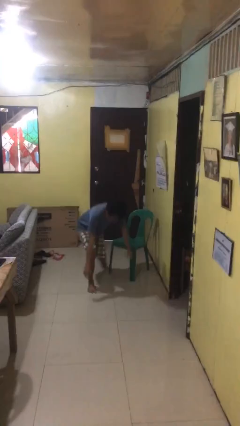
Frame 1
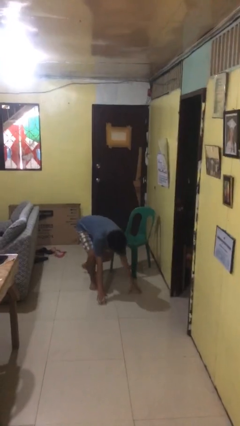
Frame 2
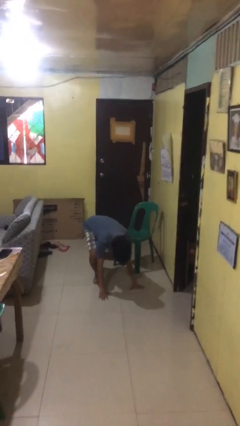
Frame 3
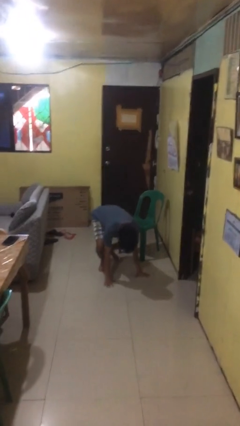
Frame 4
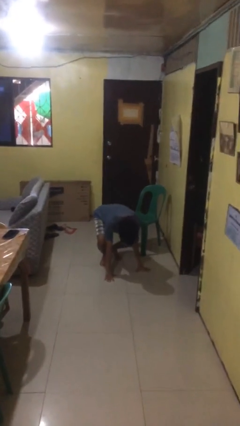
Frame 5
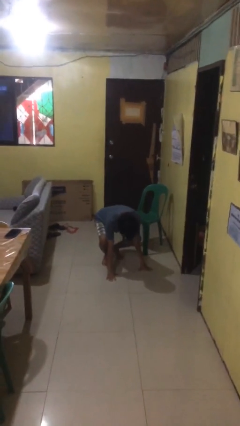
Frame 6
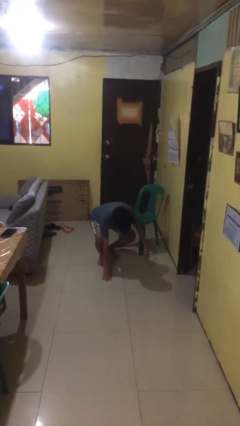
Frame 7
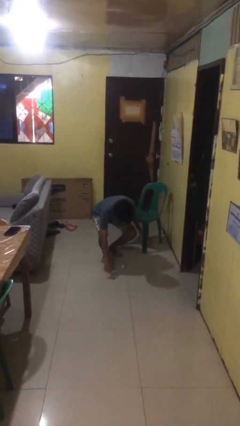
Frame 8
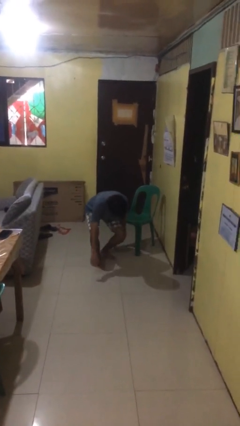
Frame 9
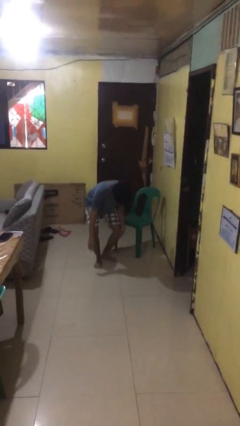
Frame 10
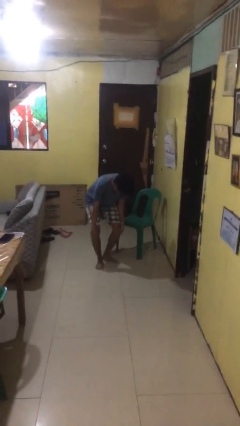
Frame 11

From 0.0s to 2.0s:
person lies down on floor

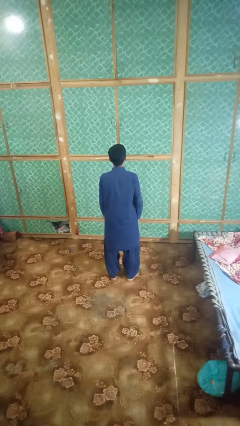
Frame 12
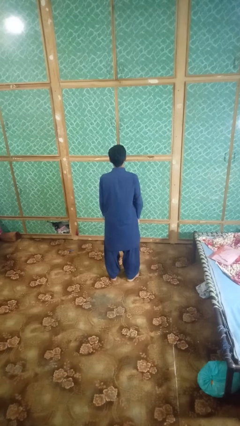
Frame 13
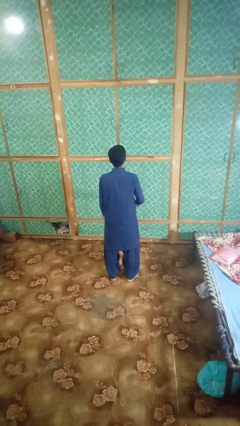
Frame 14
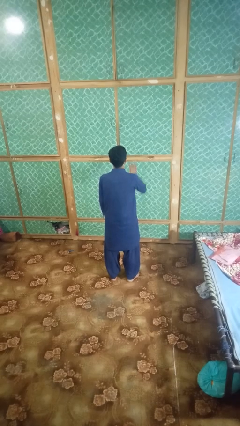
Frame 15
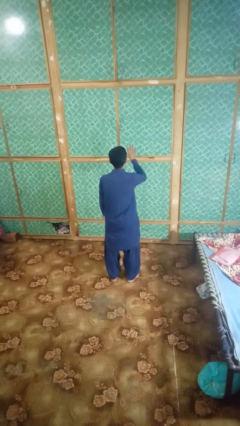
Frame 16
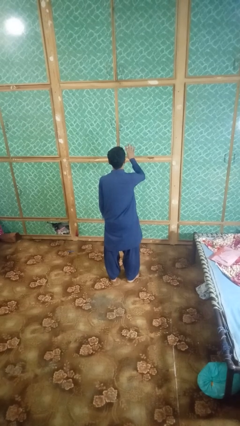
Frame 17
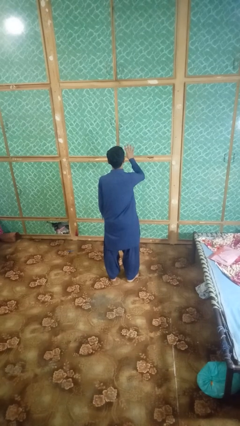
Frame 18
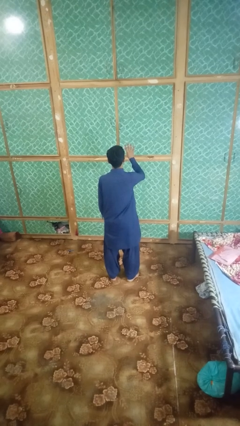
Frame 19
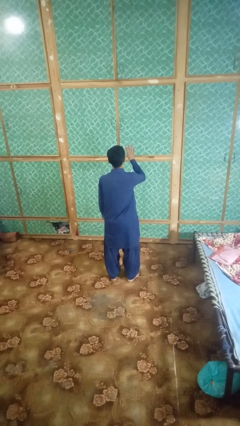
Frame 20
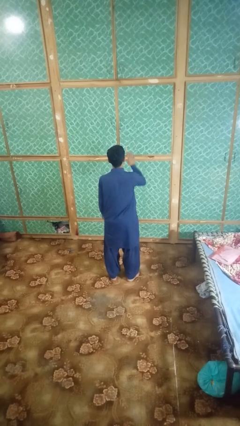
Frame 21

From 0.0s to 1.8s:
person gestures number four

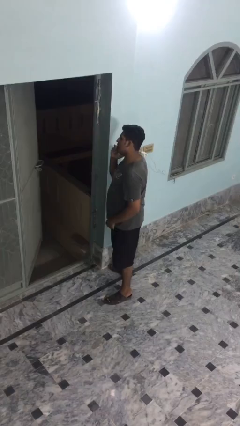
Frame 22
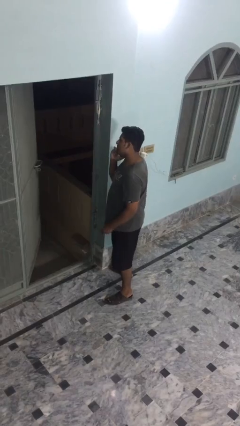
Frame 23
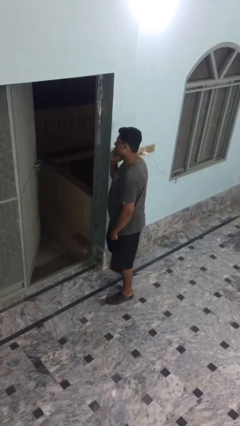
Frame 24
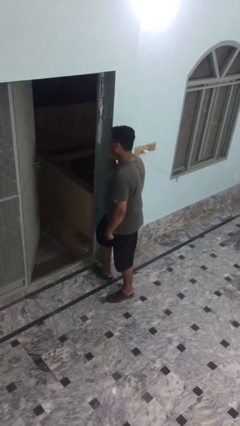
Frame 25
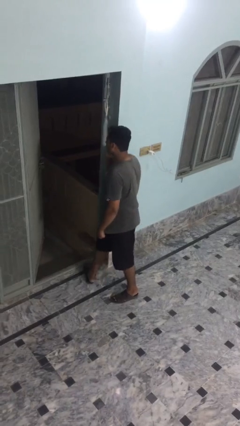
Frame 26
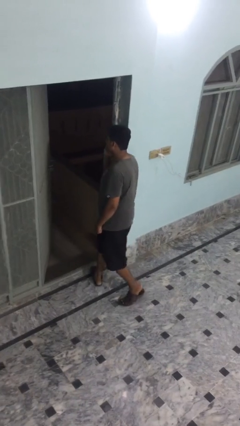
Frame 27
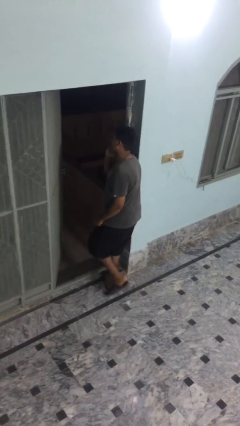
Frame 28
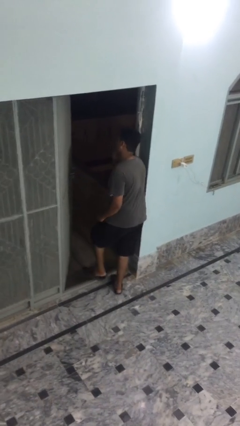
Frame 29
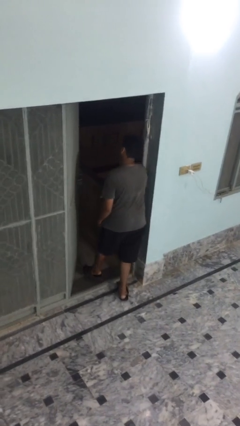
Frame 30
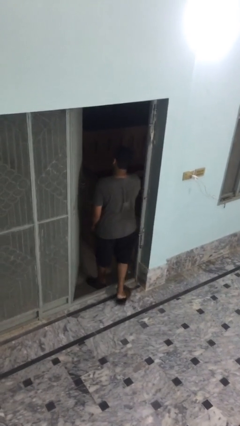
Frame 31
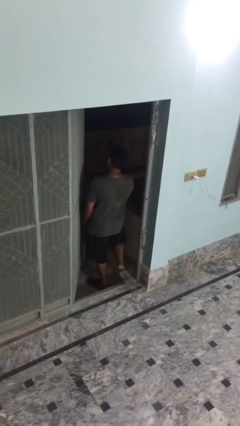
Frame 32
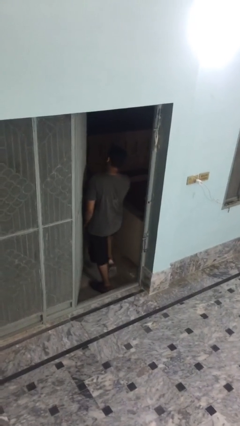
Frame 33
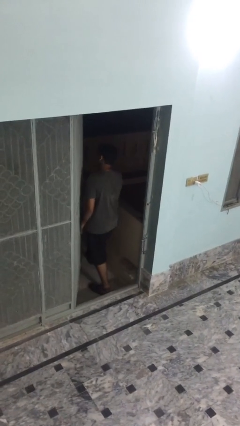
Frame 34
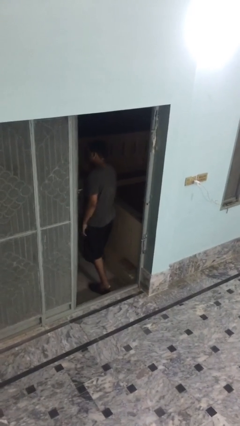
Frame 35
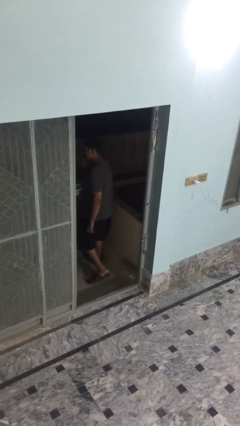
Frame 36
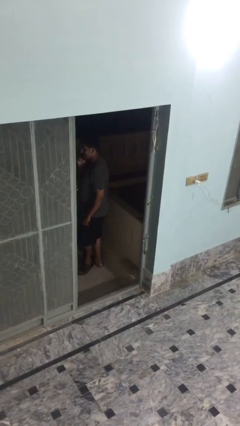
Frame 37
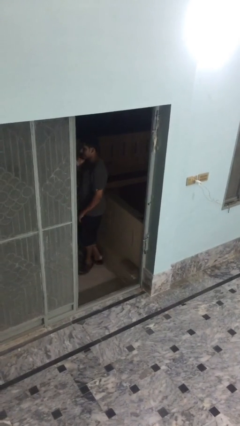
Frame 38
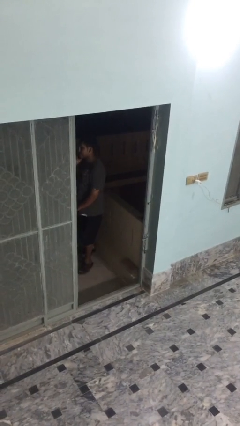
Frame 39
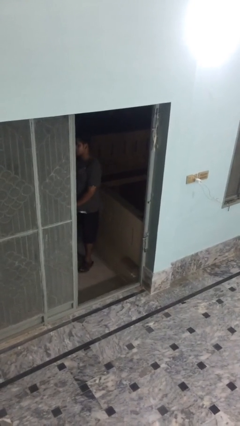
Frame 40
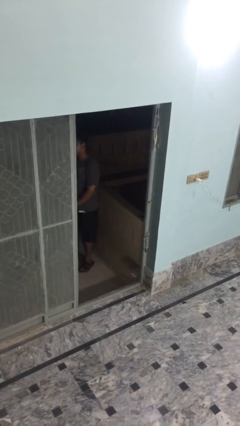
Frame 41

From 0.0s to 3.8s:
person exits scene through structure

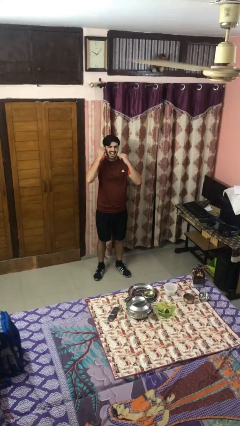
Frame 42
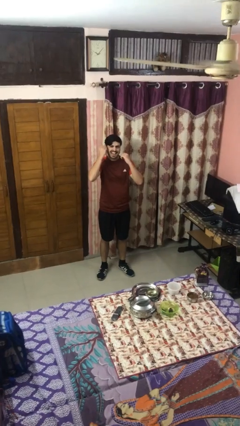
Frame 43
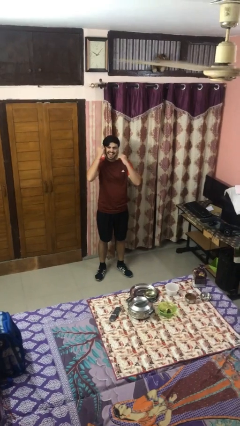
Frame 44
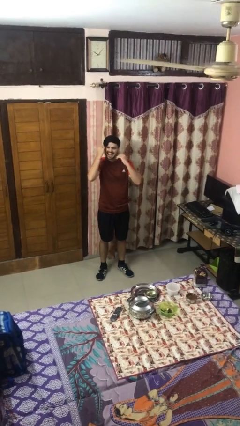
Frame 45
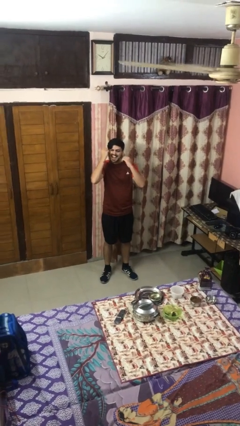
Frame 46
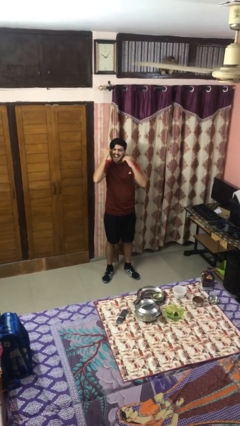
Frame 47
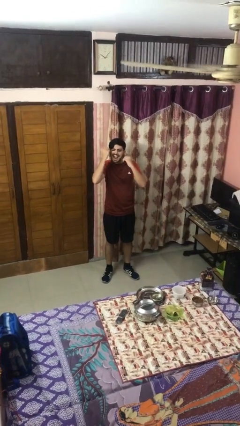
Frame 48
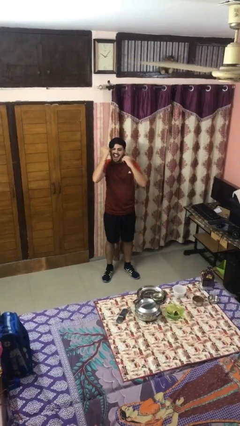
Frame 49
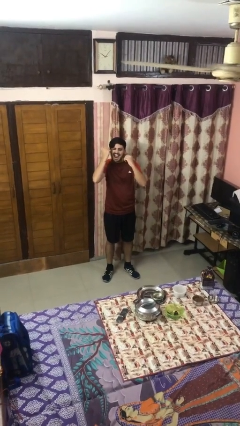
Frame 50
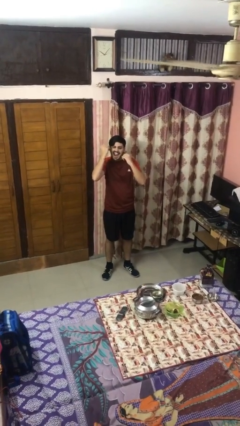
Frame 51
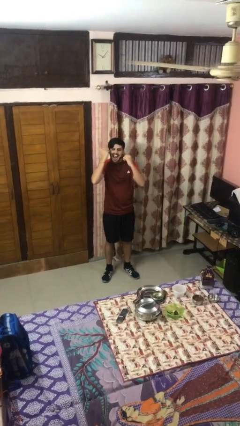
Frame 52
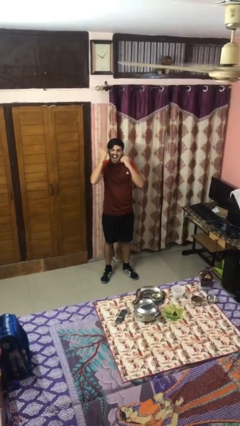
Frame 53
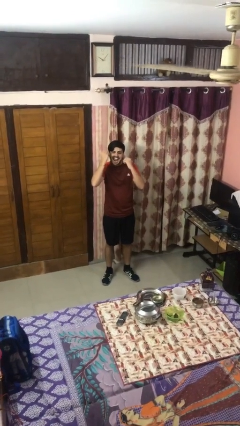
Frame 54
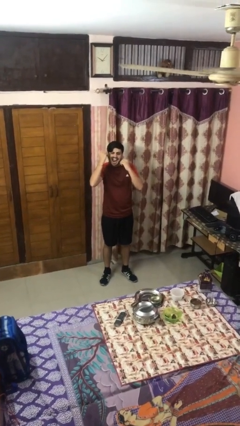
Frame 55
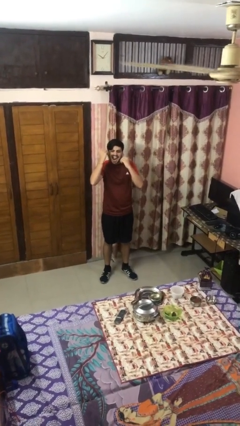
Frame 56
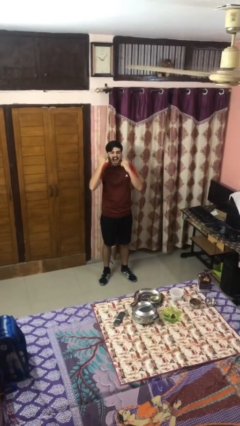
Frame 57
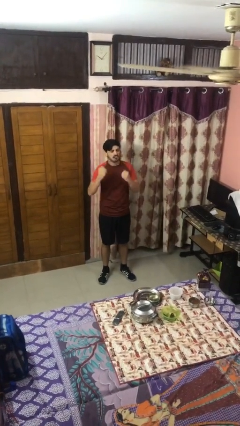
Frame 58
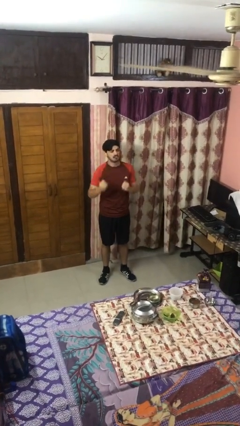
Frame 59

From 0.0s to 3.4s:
person flosses

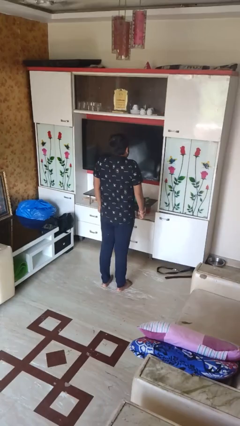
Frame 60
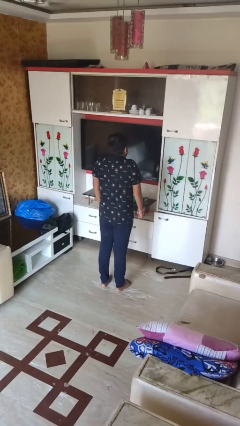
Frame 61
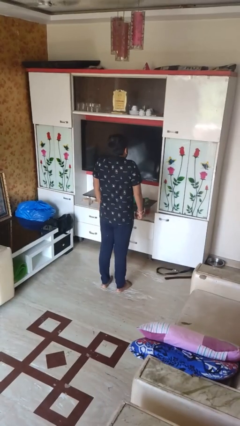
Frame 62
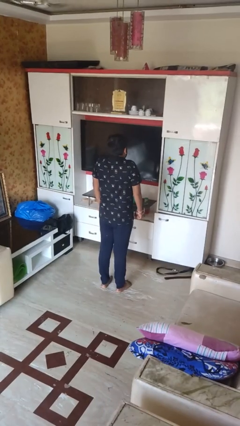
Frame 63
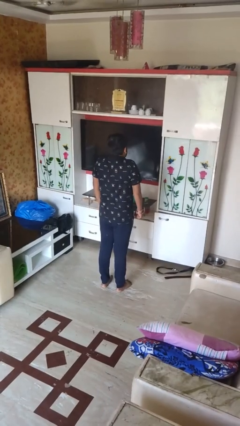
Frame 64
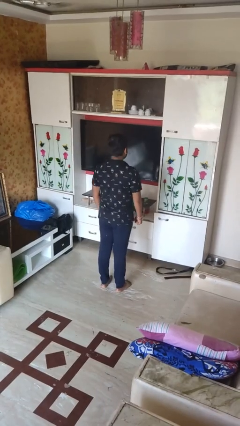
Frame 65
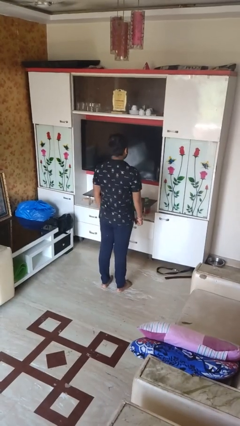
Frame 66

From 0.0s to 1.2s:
person shrugs

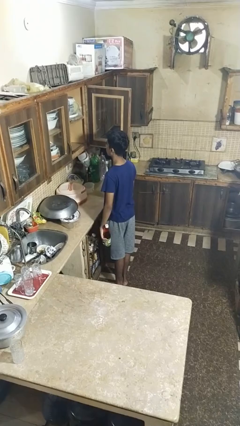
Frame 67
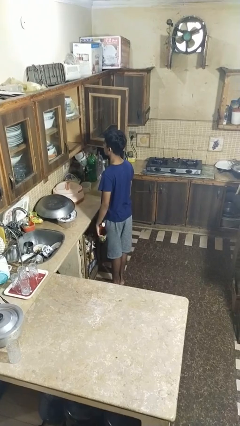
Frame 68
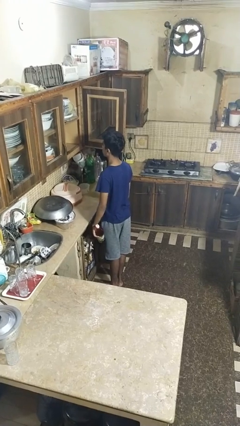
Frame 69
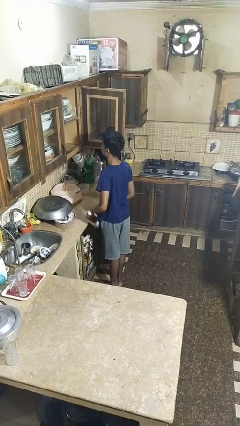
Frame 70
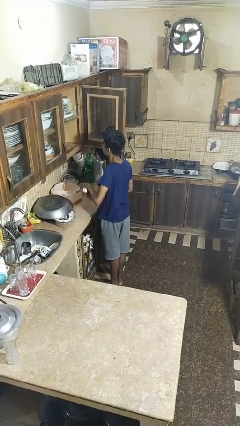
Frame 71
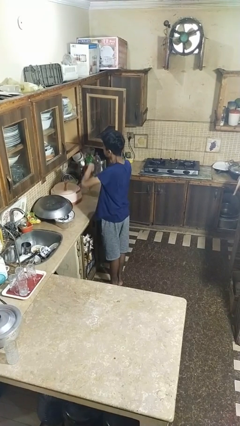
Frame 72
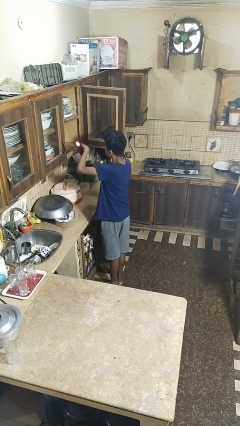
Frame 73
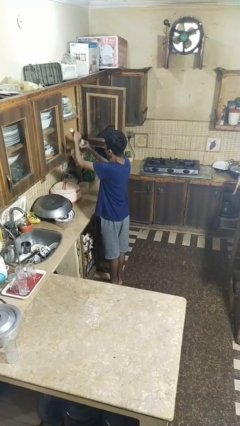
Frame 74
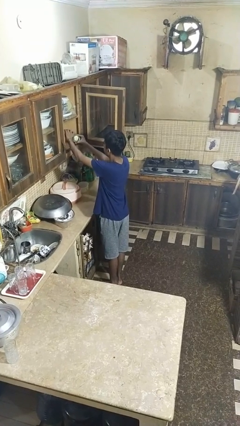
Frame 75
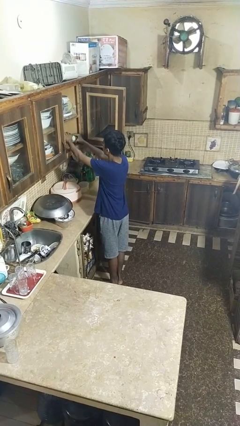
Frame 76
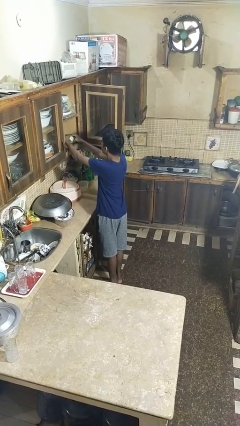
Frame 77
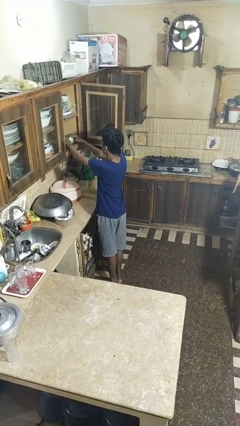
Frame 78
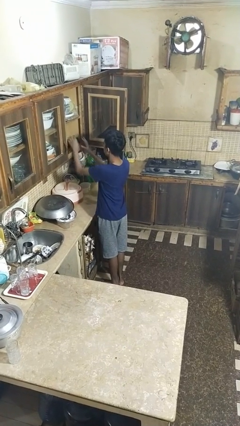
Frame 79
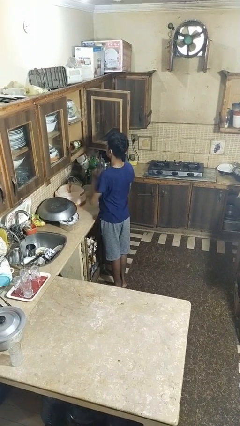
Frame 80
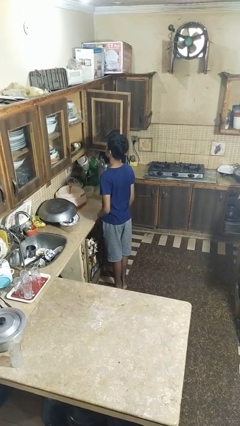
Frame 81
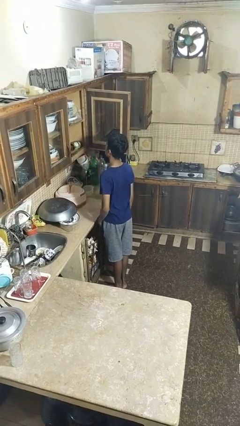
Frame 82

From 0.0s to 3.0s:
person puts object in cabinet

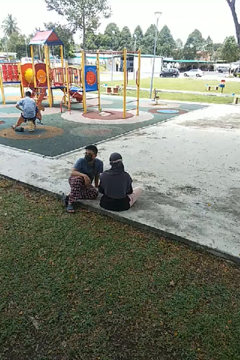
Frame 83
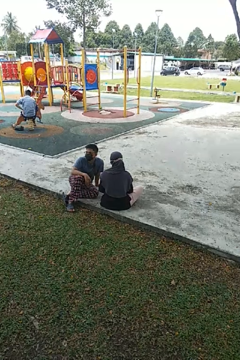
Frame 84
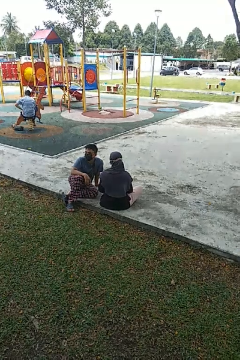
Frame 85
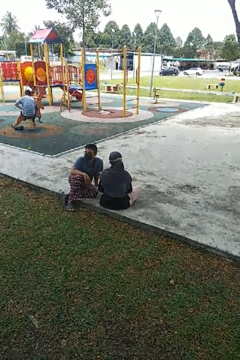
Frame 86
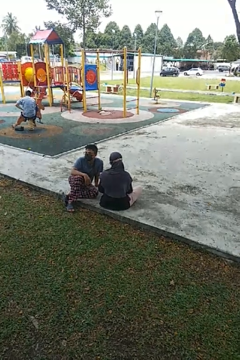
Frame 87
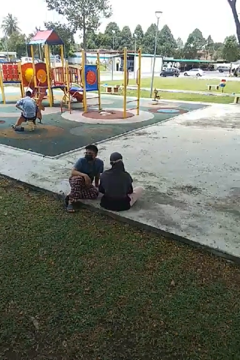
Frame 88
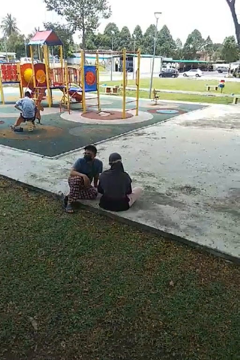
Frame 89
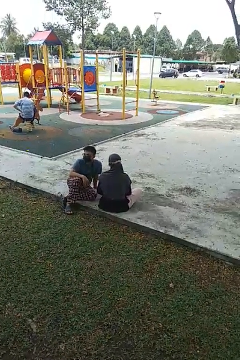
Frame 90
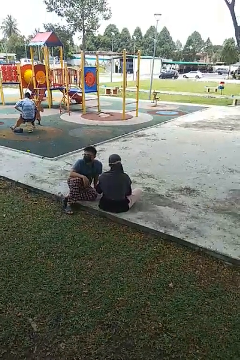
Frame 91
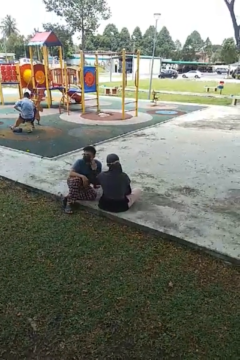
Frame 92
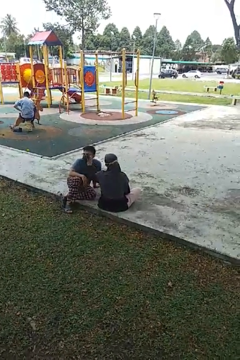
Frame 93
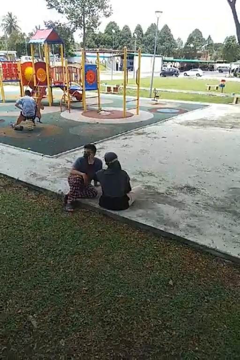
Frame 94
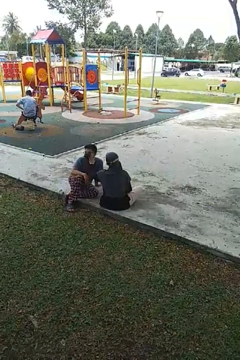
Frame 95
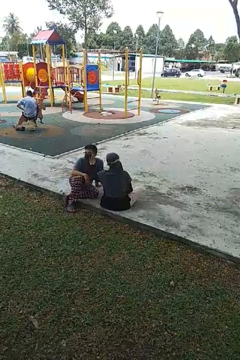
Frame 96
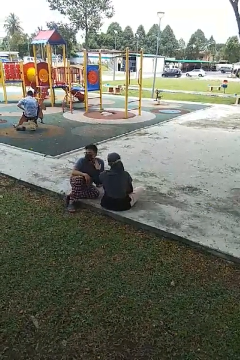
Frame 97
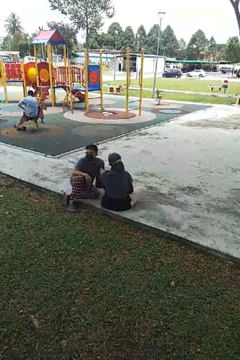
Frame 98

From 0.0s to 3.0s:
person touches face of person
